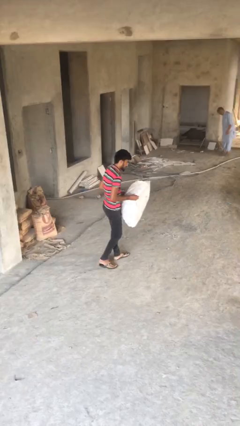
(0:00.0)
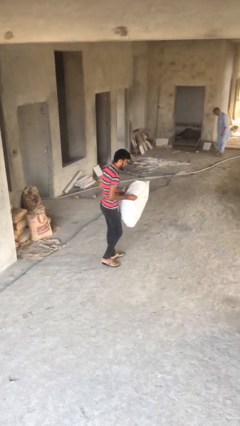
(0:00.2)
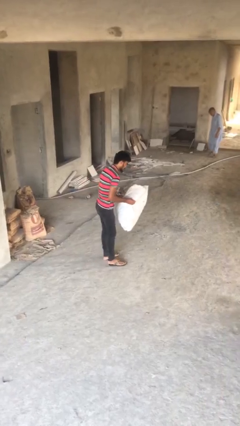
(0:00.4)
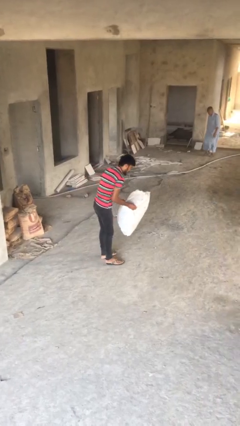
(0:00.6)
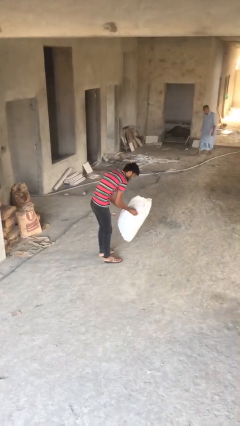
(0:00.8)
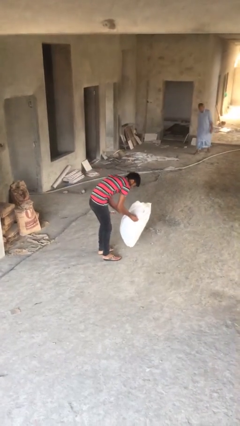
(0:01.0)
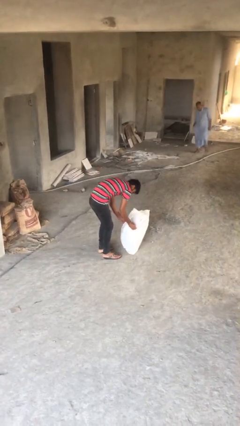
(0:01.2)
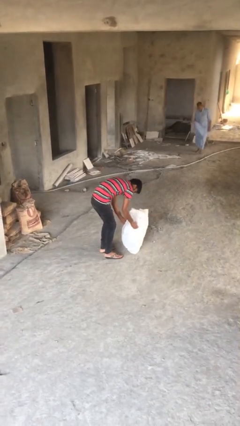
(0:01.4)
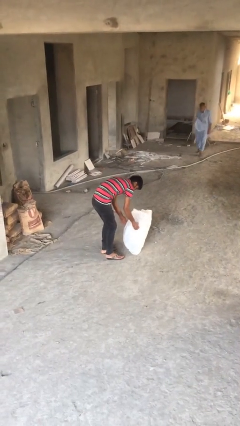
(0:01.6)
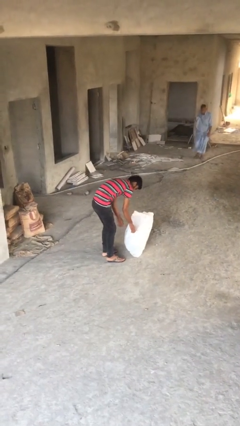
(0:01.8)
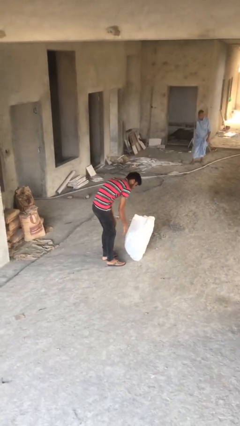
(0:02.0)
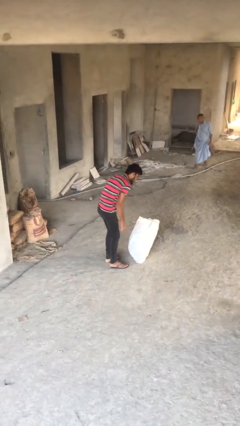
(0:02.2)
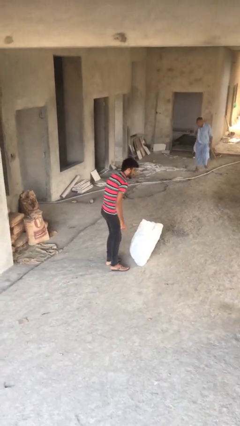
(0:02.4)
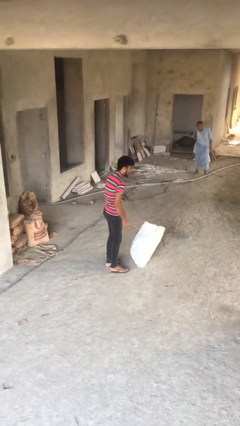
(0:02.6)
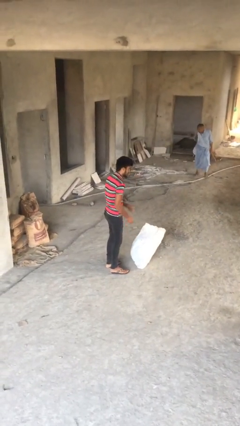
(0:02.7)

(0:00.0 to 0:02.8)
person puts down object on floor

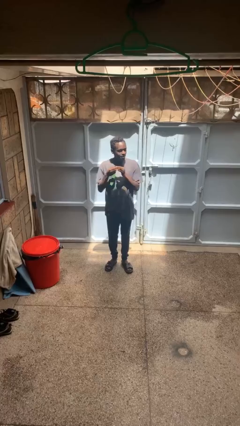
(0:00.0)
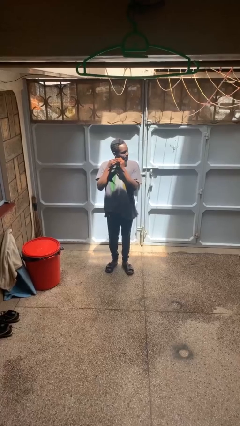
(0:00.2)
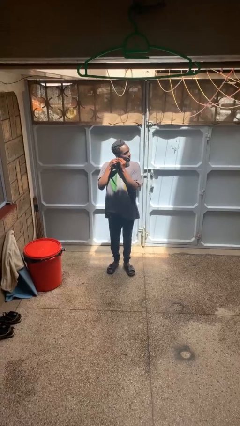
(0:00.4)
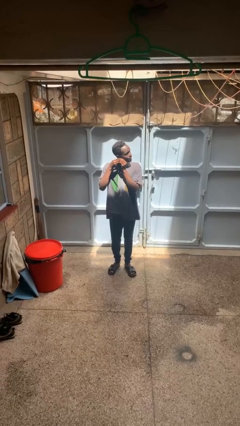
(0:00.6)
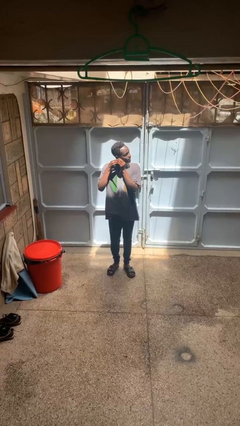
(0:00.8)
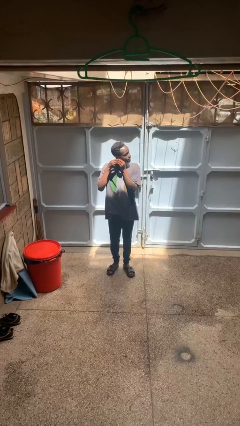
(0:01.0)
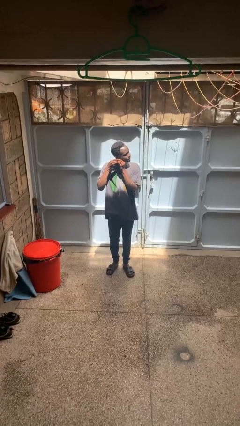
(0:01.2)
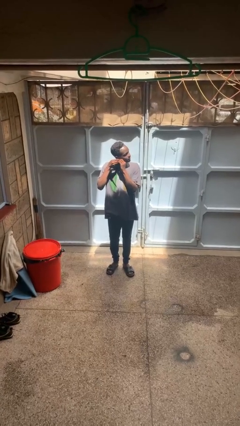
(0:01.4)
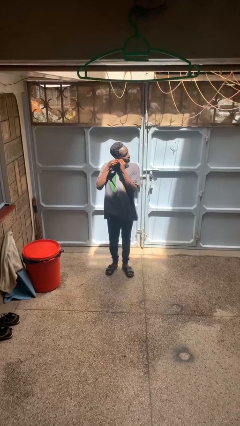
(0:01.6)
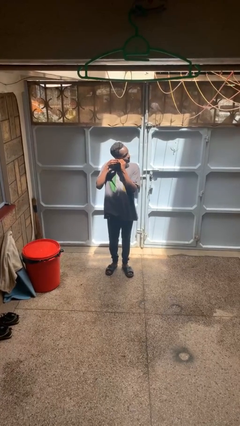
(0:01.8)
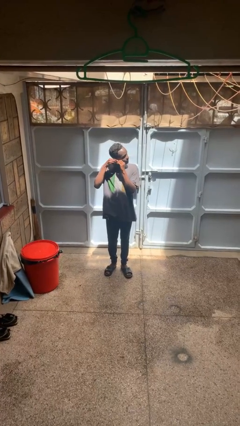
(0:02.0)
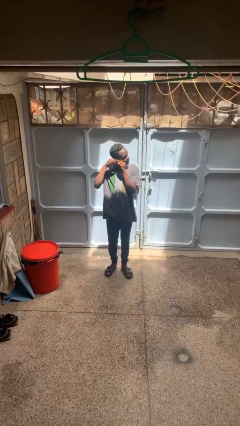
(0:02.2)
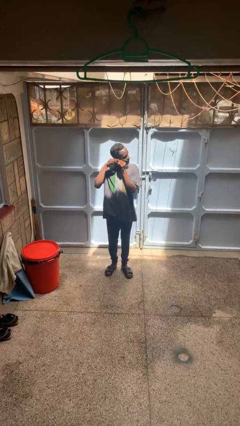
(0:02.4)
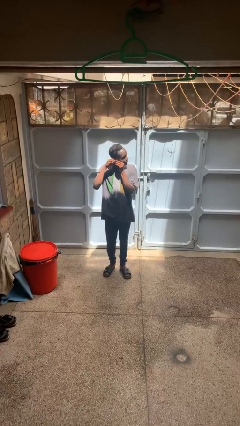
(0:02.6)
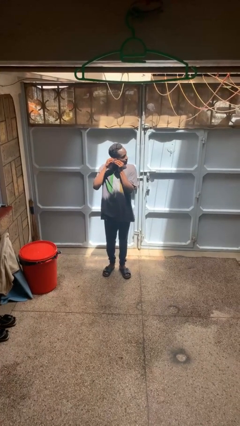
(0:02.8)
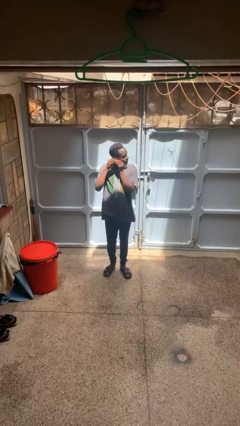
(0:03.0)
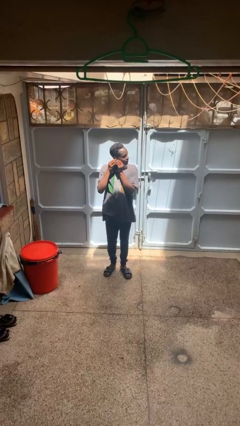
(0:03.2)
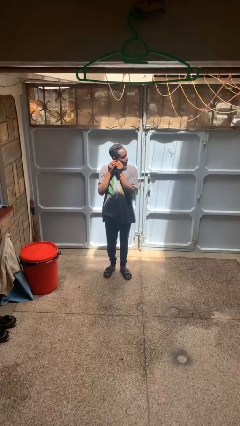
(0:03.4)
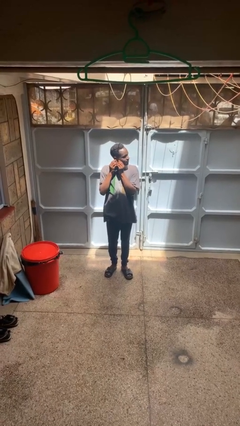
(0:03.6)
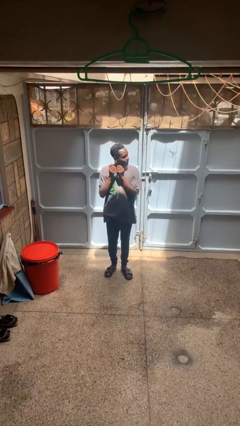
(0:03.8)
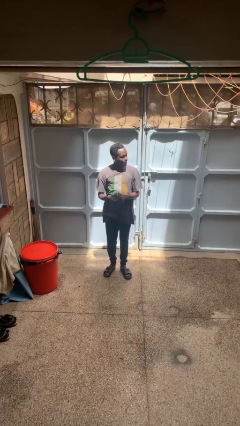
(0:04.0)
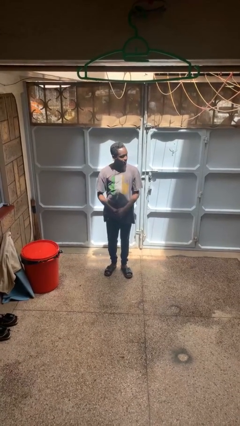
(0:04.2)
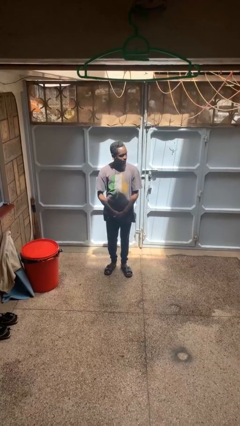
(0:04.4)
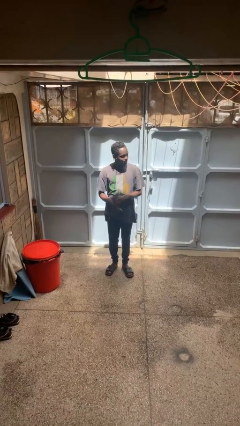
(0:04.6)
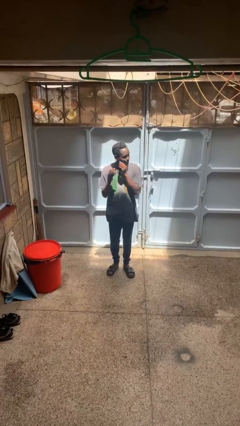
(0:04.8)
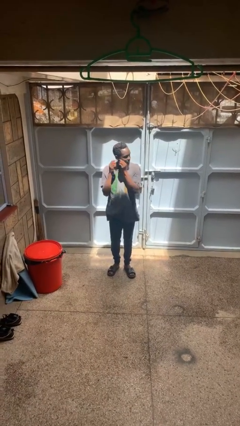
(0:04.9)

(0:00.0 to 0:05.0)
person puts on earrings

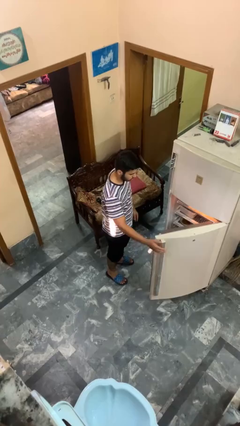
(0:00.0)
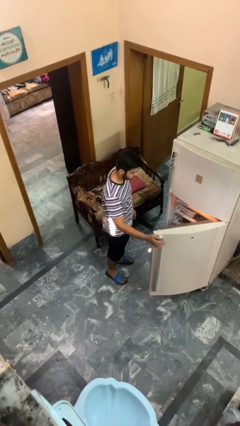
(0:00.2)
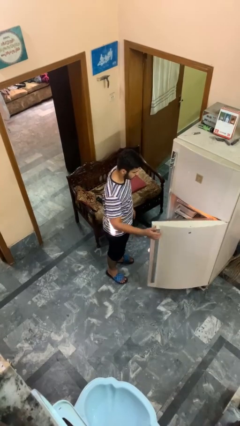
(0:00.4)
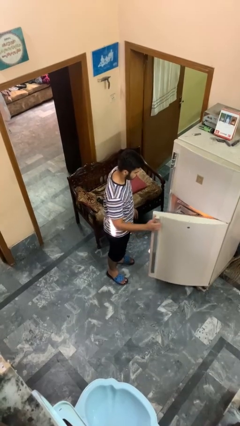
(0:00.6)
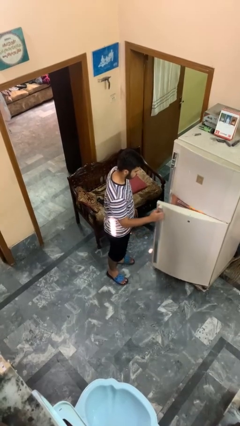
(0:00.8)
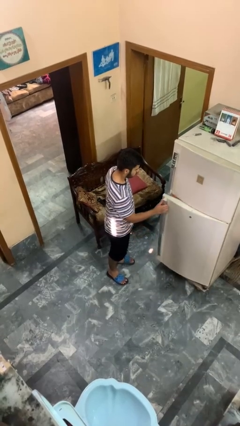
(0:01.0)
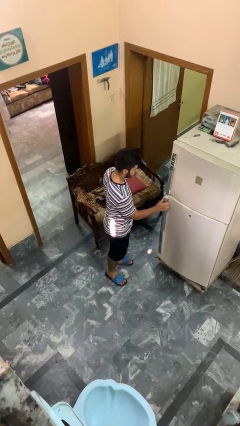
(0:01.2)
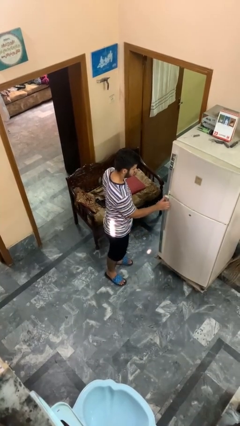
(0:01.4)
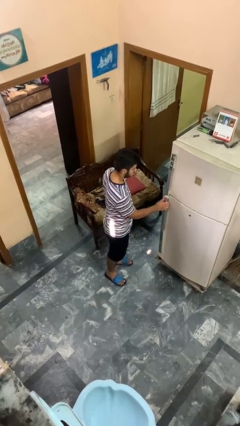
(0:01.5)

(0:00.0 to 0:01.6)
person closes refrigerator

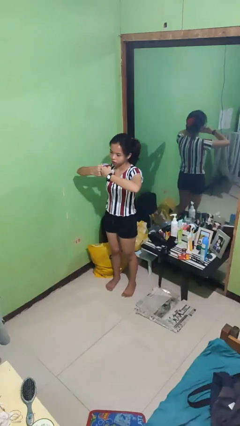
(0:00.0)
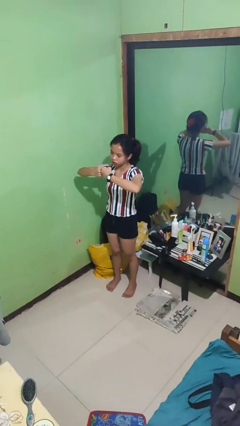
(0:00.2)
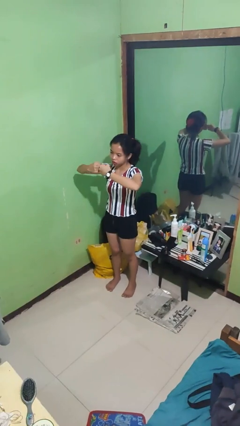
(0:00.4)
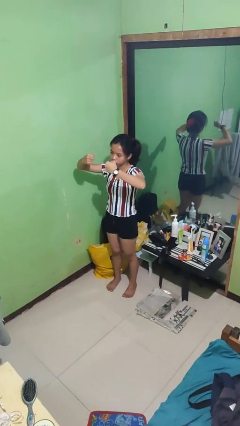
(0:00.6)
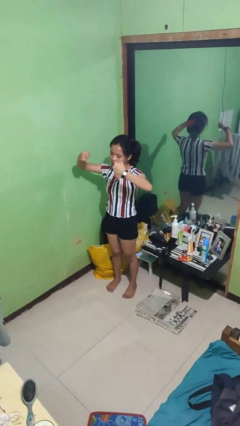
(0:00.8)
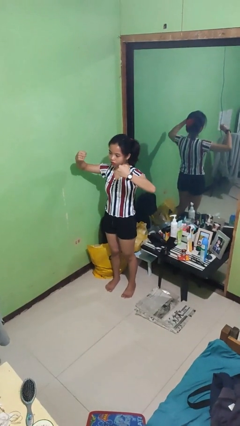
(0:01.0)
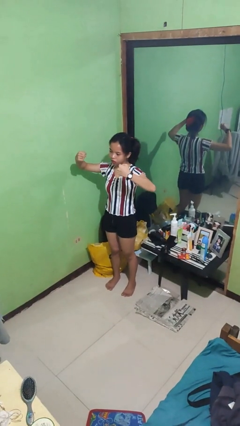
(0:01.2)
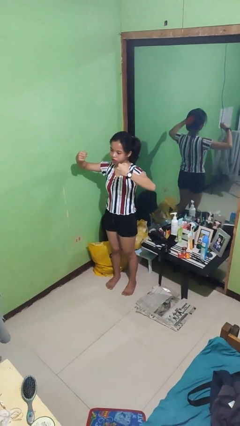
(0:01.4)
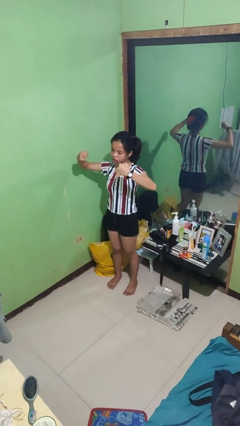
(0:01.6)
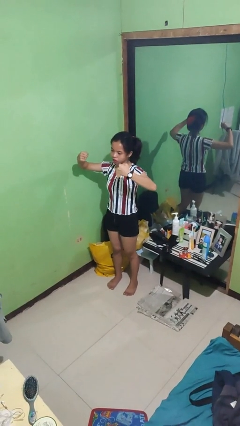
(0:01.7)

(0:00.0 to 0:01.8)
person gestures zoom in

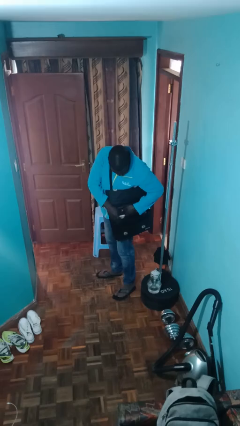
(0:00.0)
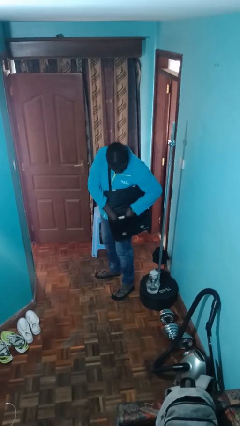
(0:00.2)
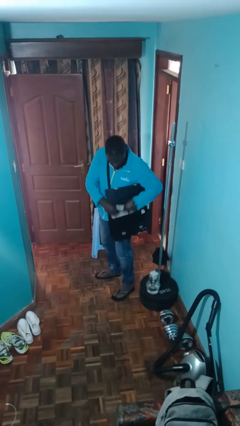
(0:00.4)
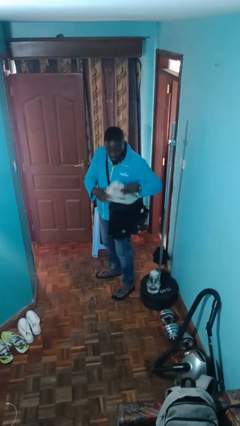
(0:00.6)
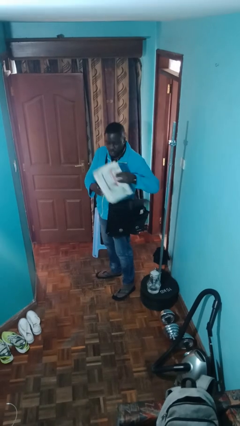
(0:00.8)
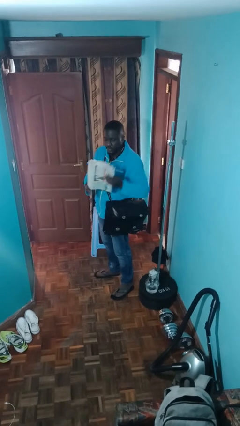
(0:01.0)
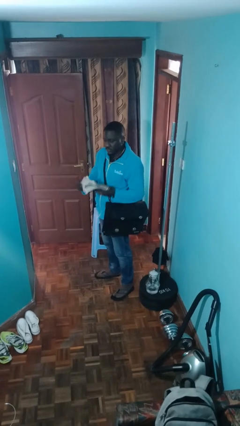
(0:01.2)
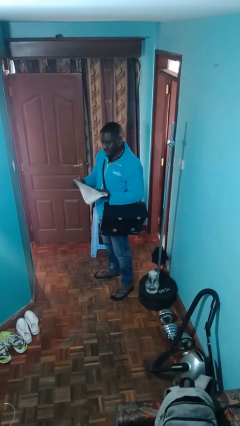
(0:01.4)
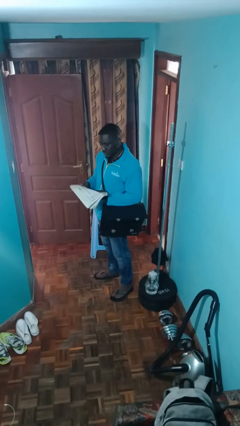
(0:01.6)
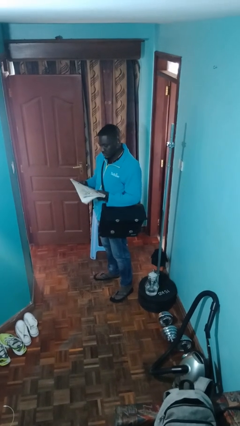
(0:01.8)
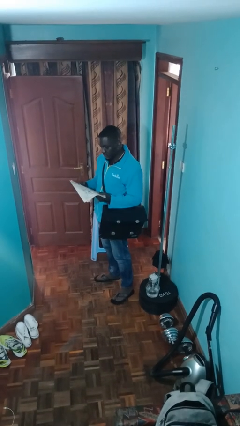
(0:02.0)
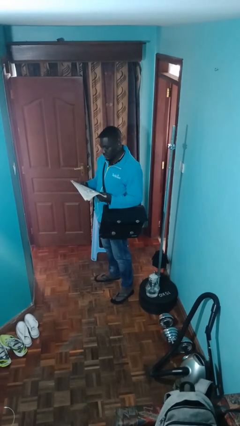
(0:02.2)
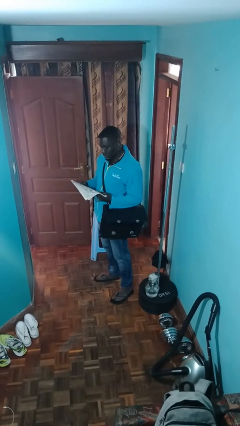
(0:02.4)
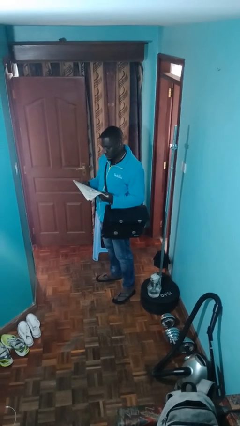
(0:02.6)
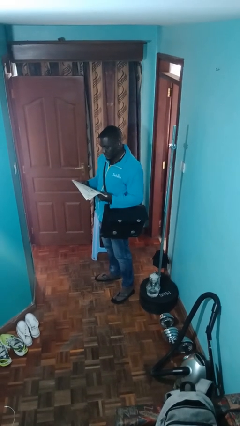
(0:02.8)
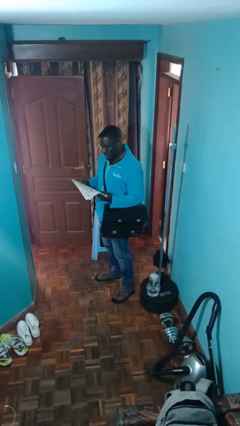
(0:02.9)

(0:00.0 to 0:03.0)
person takes object from purse

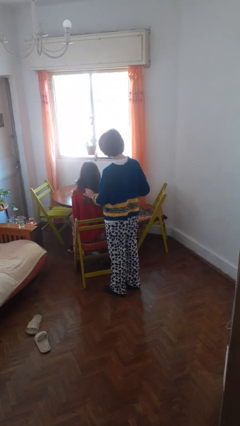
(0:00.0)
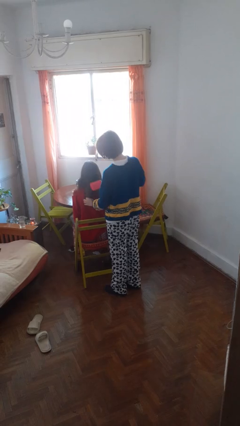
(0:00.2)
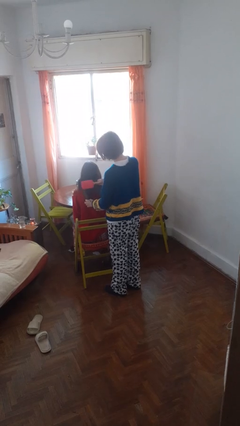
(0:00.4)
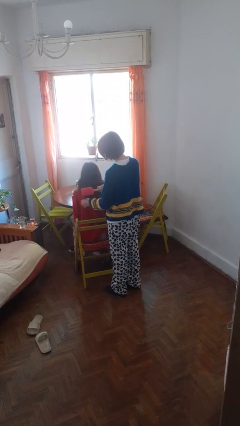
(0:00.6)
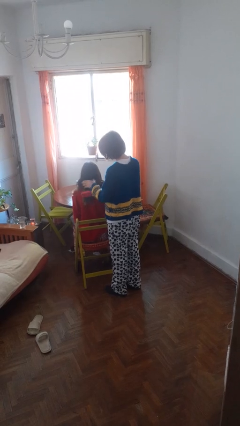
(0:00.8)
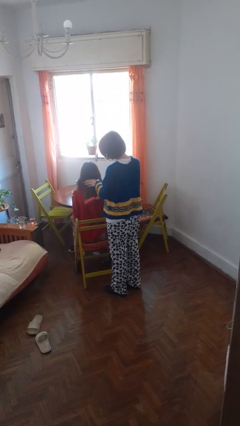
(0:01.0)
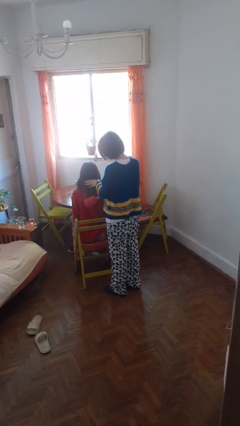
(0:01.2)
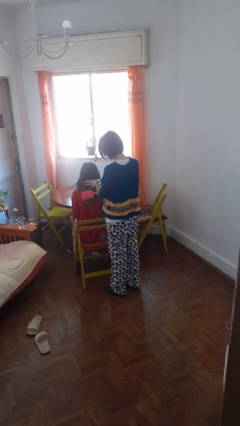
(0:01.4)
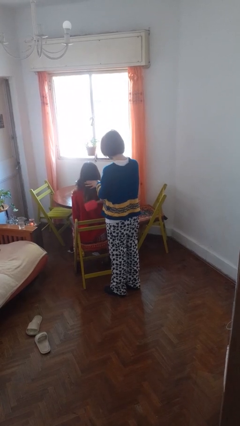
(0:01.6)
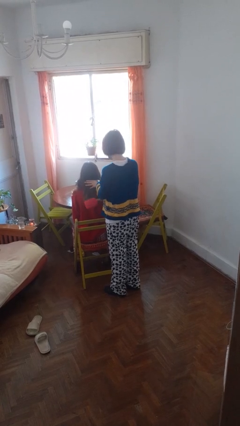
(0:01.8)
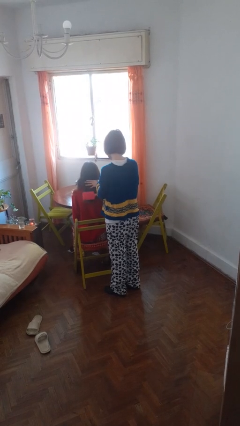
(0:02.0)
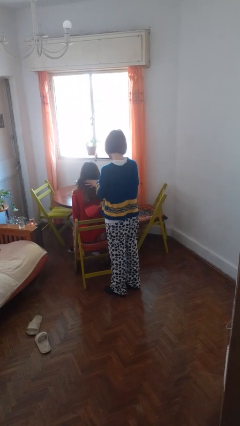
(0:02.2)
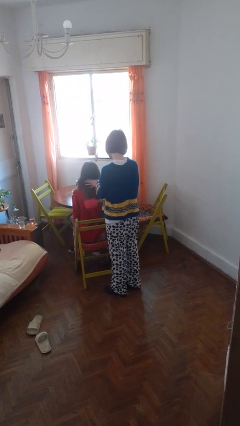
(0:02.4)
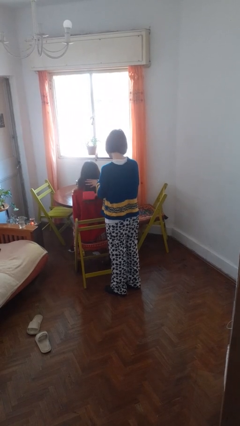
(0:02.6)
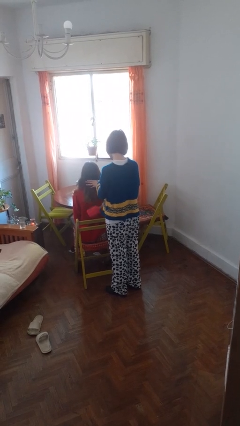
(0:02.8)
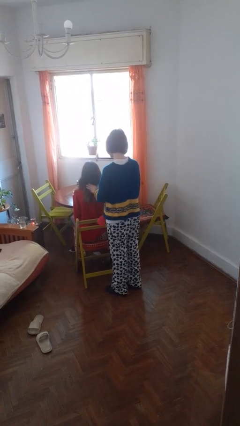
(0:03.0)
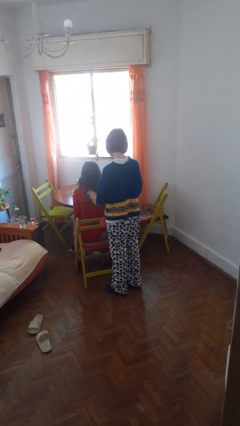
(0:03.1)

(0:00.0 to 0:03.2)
person brushes hair of person
